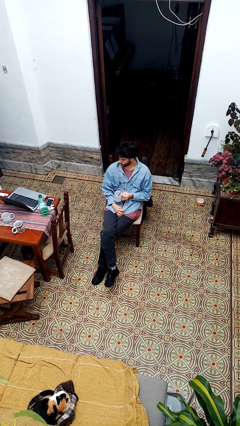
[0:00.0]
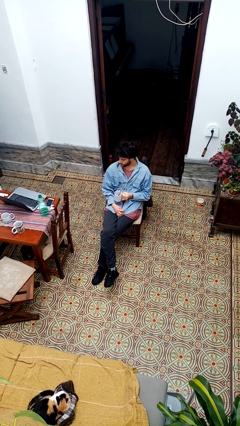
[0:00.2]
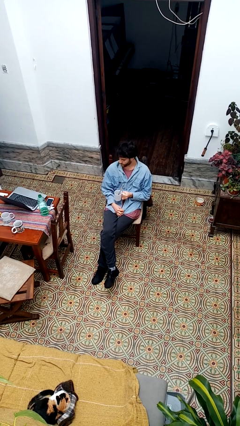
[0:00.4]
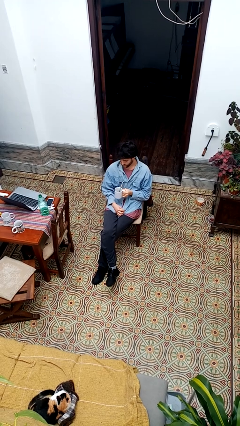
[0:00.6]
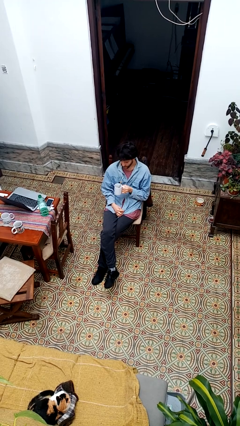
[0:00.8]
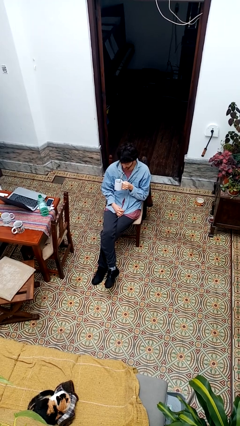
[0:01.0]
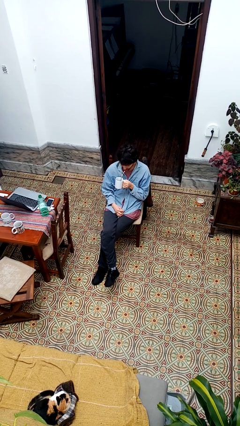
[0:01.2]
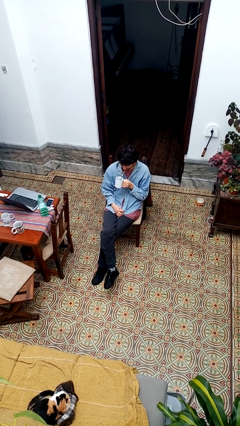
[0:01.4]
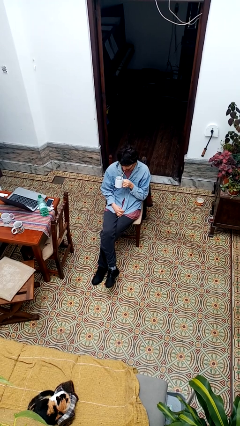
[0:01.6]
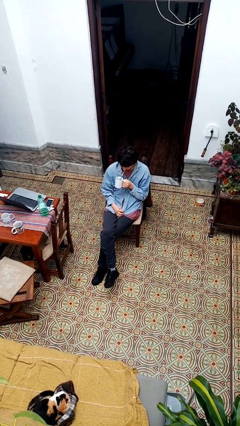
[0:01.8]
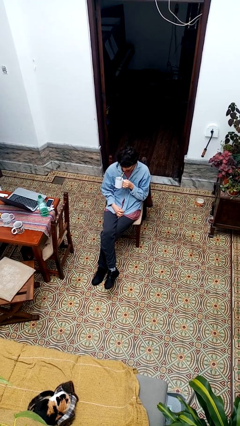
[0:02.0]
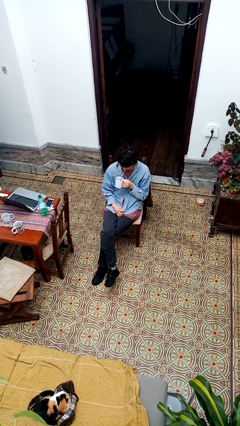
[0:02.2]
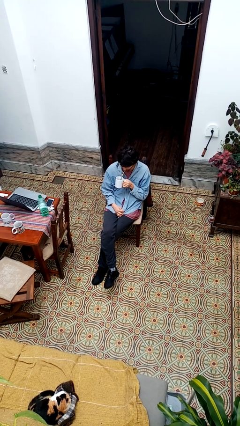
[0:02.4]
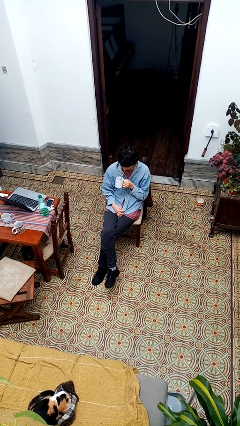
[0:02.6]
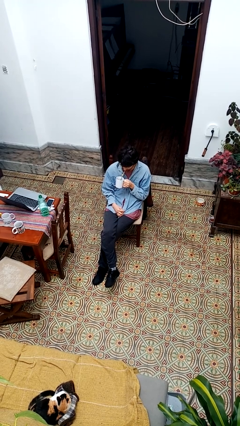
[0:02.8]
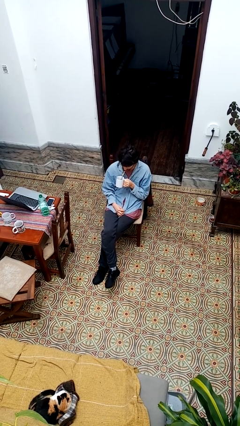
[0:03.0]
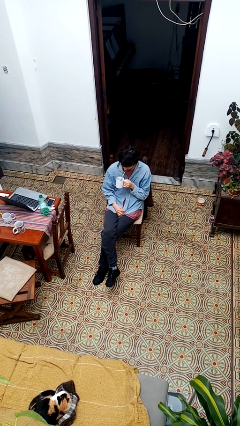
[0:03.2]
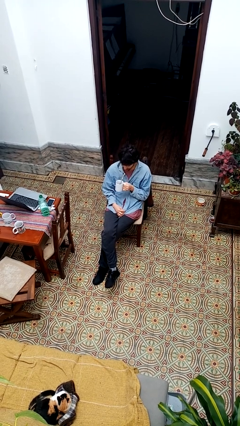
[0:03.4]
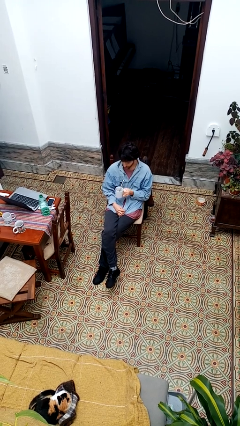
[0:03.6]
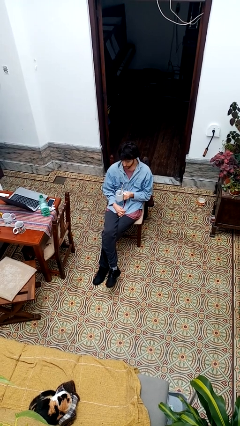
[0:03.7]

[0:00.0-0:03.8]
person drinks from straw

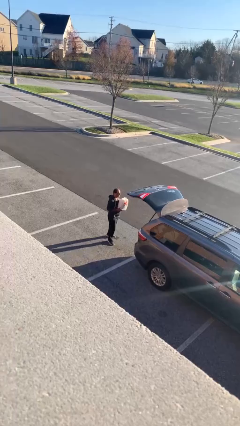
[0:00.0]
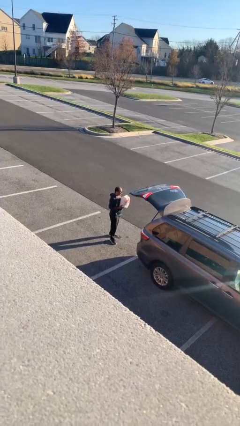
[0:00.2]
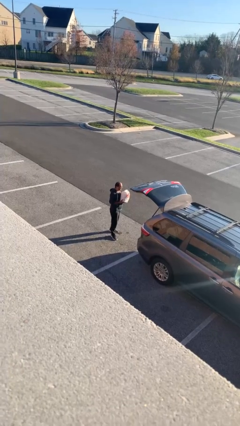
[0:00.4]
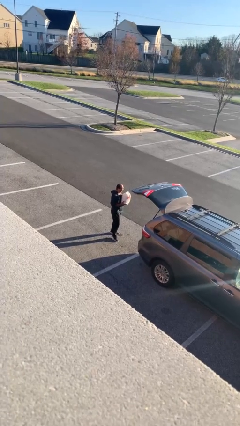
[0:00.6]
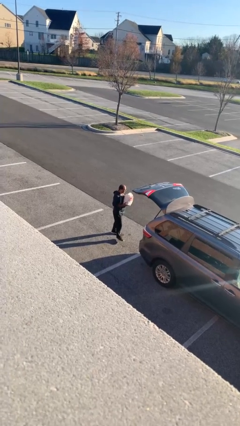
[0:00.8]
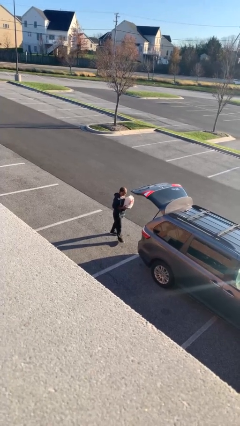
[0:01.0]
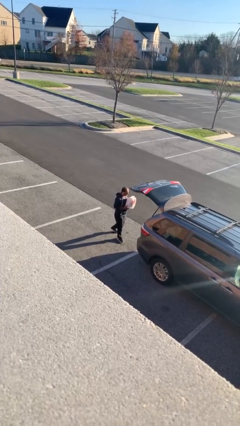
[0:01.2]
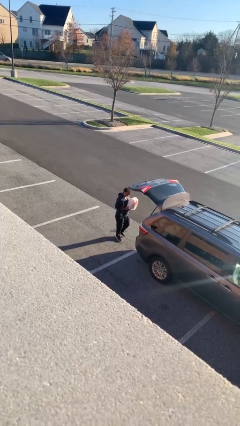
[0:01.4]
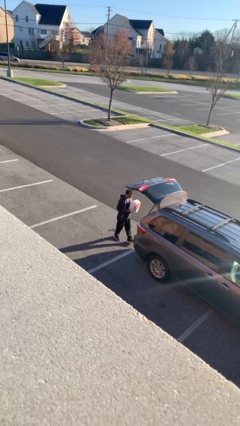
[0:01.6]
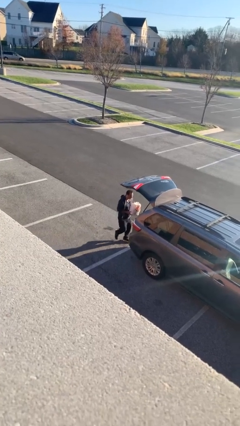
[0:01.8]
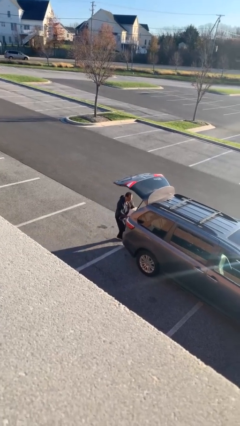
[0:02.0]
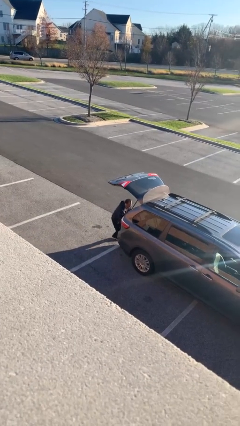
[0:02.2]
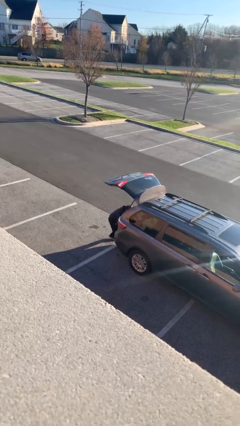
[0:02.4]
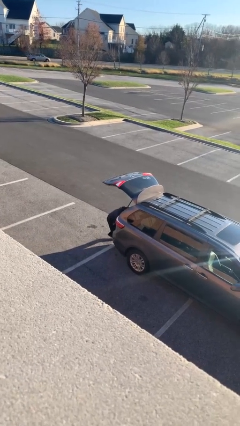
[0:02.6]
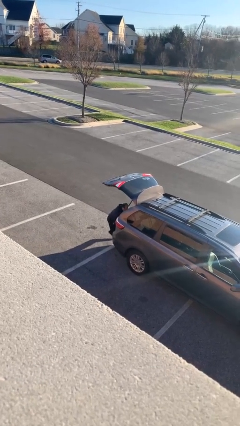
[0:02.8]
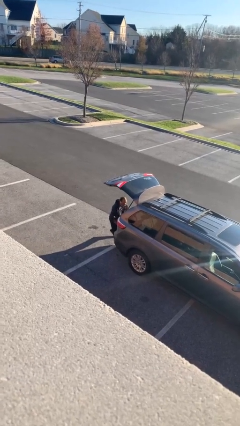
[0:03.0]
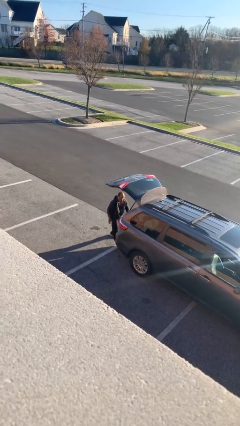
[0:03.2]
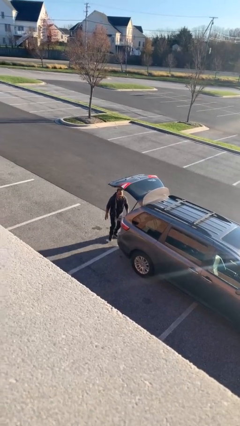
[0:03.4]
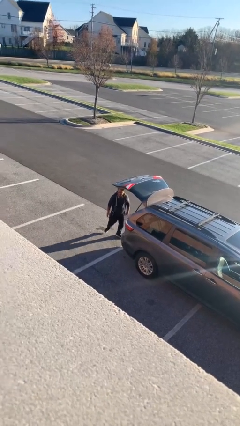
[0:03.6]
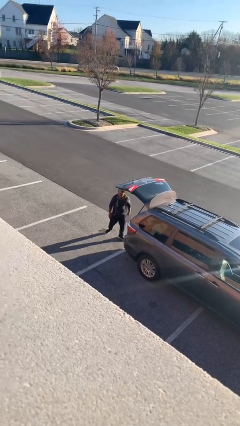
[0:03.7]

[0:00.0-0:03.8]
person loads car

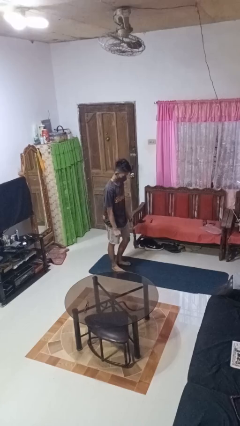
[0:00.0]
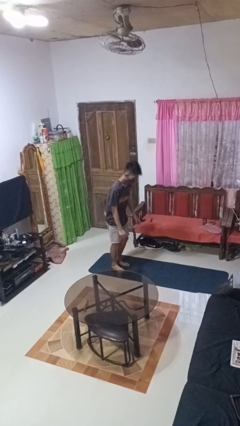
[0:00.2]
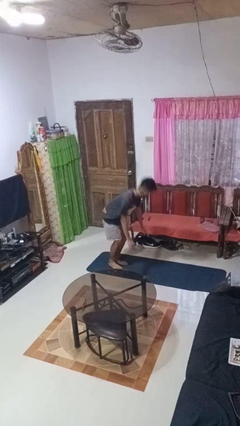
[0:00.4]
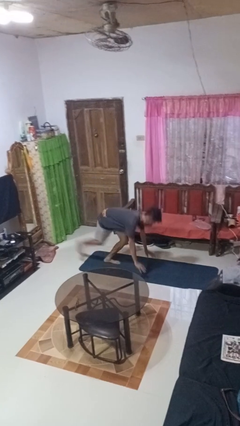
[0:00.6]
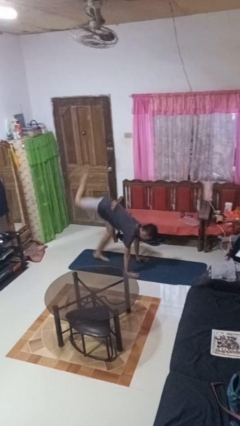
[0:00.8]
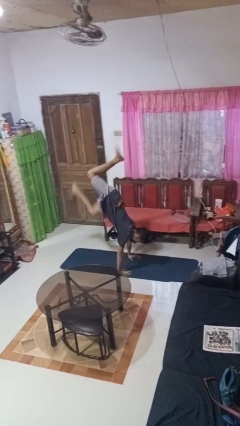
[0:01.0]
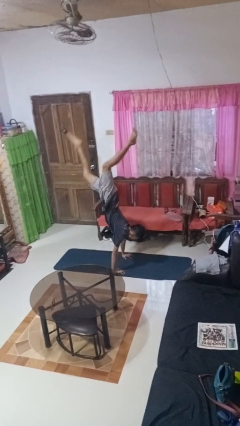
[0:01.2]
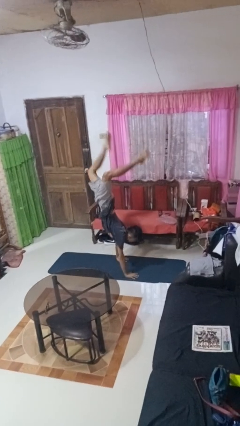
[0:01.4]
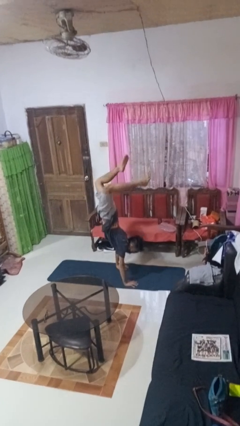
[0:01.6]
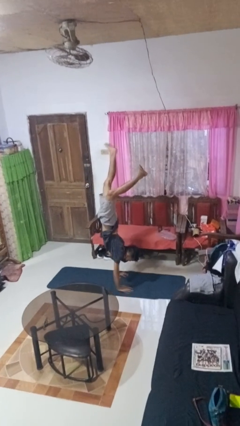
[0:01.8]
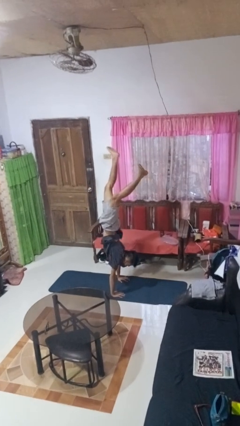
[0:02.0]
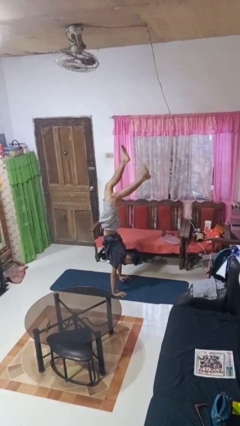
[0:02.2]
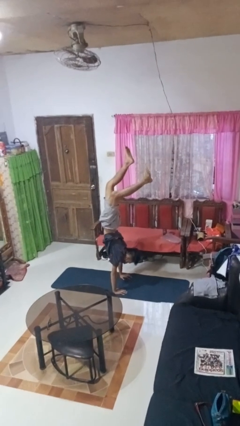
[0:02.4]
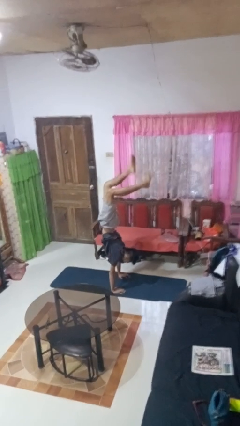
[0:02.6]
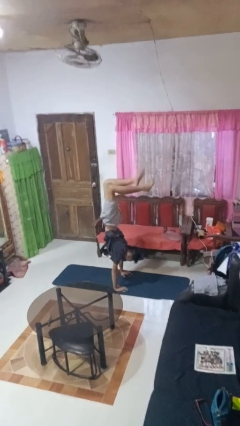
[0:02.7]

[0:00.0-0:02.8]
person handstand

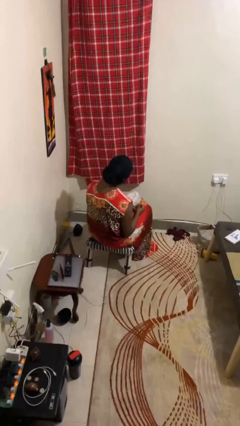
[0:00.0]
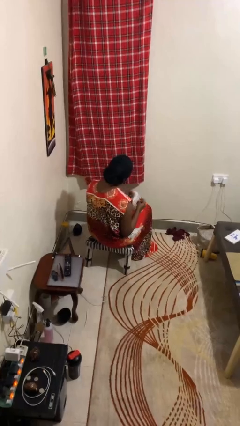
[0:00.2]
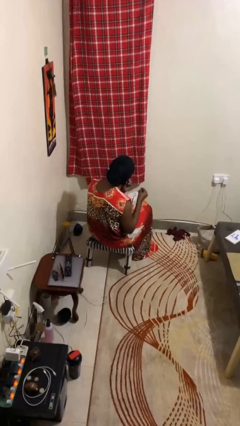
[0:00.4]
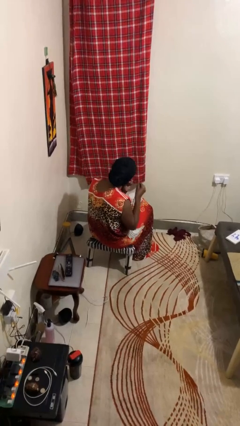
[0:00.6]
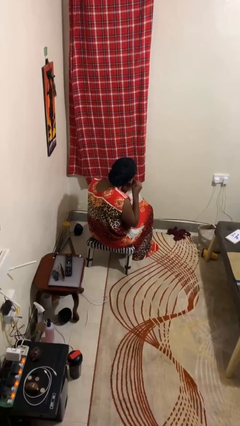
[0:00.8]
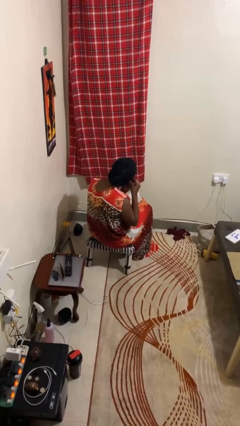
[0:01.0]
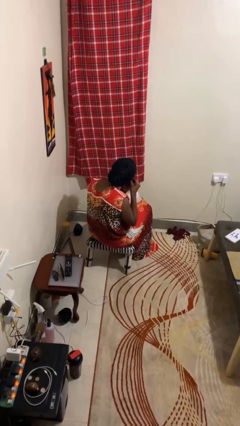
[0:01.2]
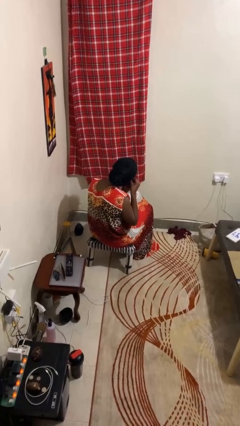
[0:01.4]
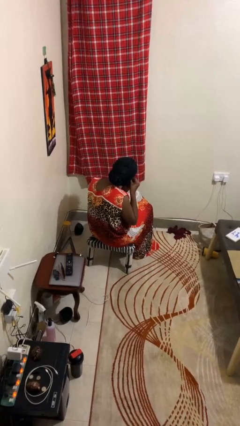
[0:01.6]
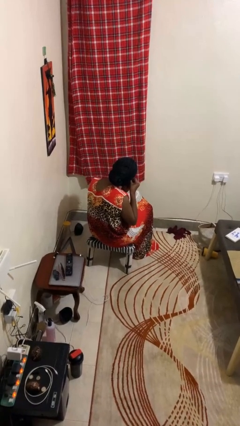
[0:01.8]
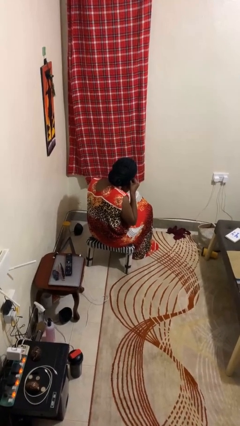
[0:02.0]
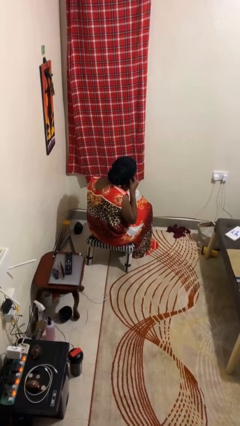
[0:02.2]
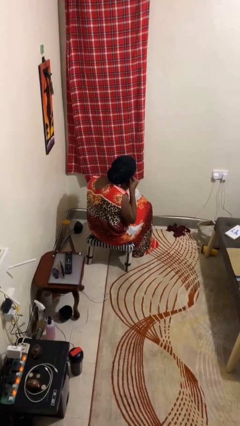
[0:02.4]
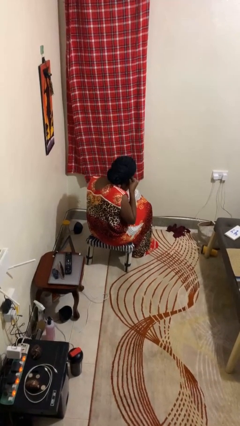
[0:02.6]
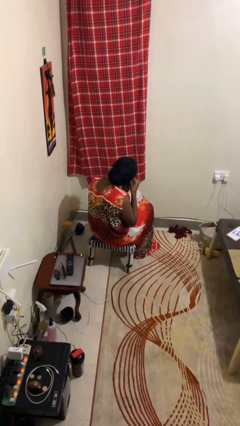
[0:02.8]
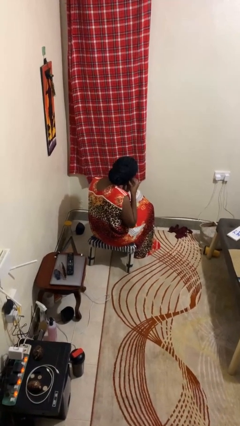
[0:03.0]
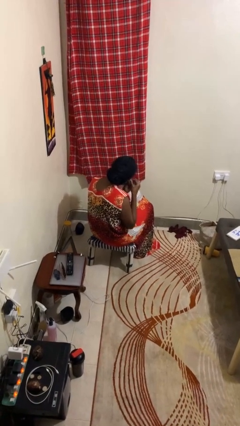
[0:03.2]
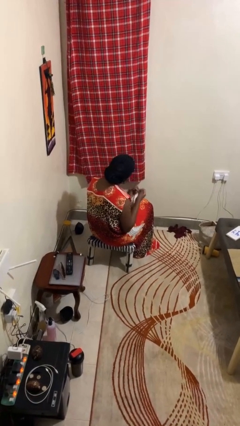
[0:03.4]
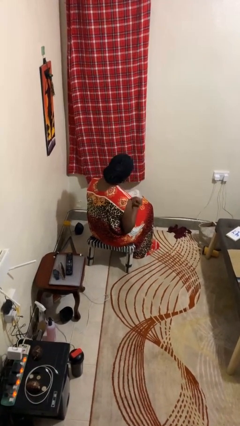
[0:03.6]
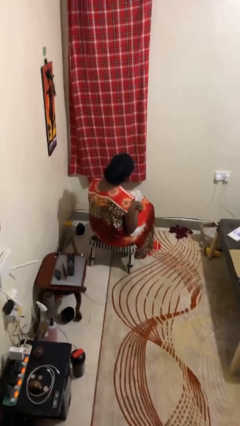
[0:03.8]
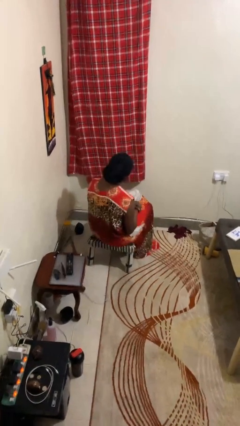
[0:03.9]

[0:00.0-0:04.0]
person puts on earrings

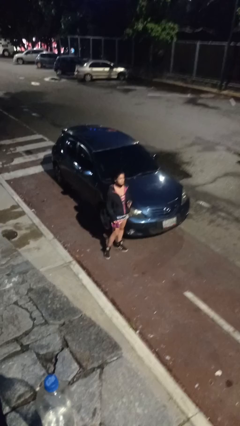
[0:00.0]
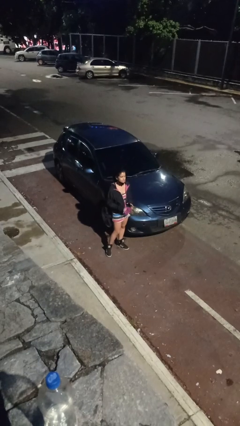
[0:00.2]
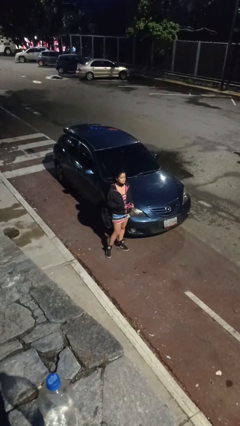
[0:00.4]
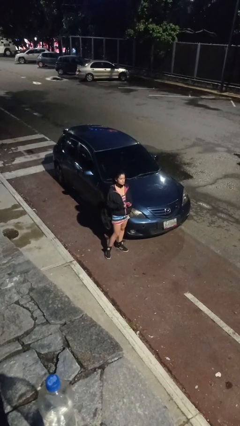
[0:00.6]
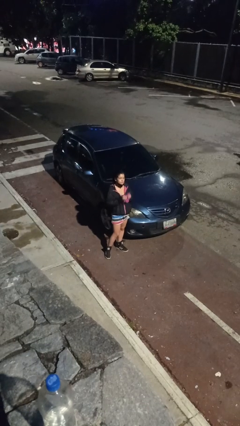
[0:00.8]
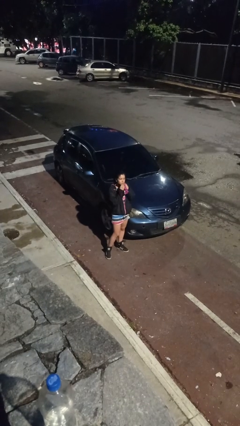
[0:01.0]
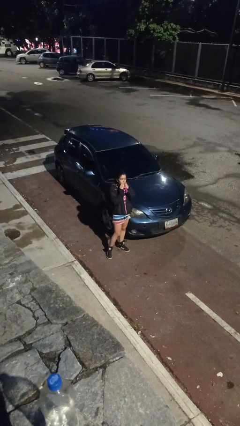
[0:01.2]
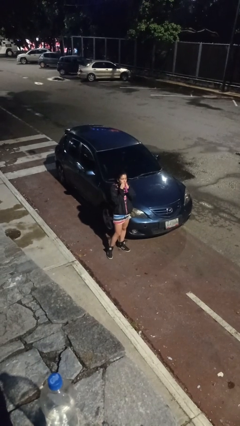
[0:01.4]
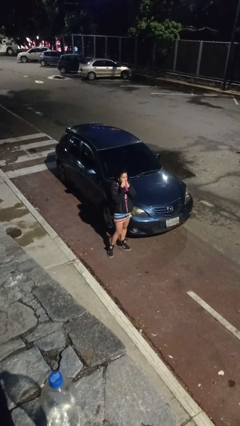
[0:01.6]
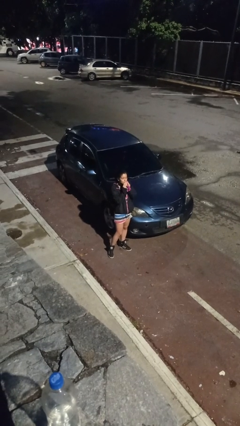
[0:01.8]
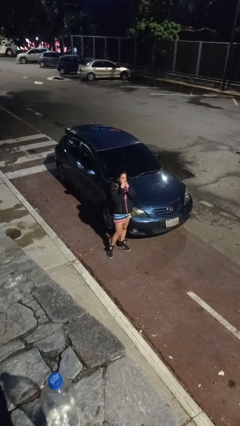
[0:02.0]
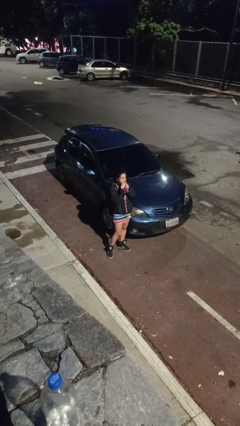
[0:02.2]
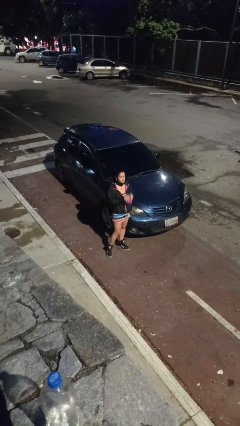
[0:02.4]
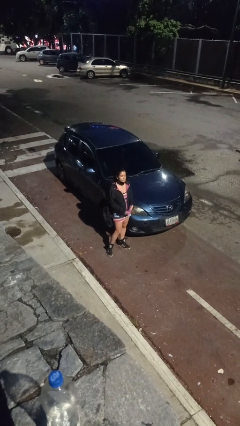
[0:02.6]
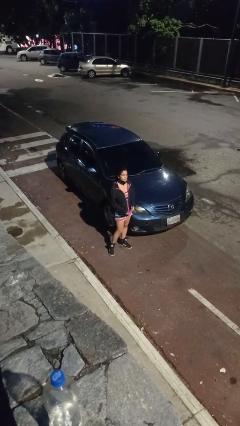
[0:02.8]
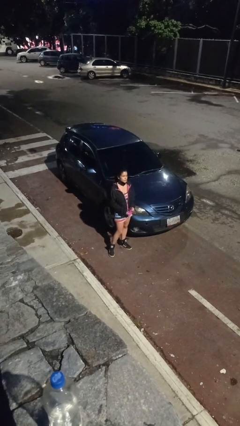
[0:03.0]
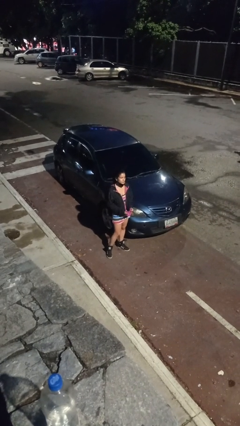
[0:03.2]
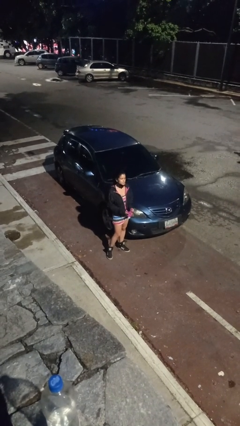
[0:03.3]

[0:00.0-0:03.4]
person wipes mouth with napkin
